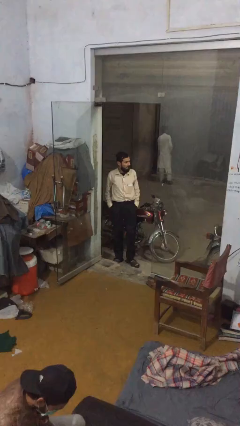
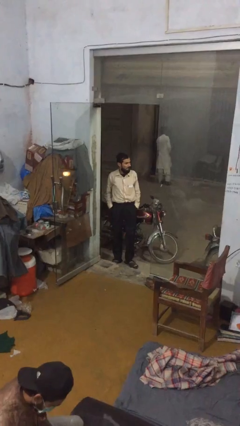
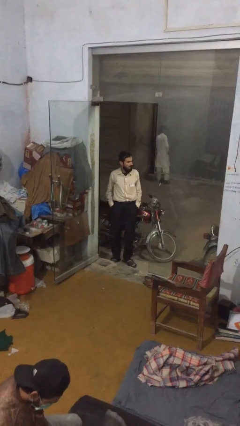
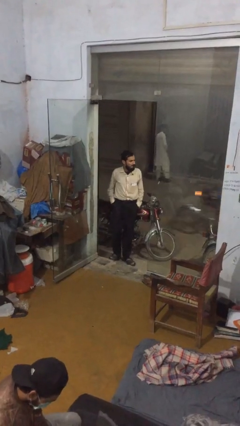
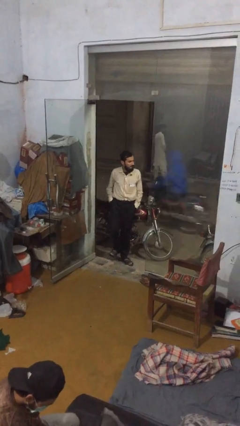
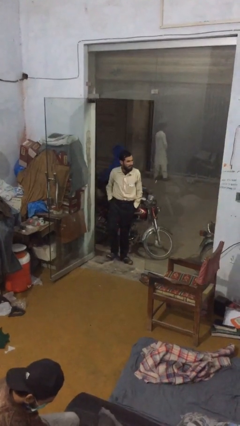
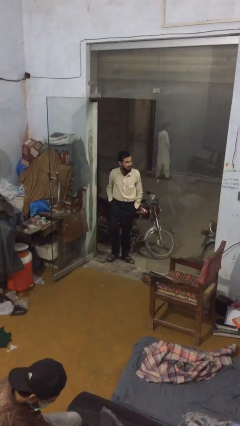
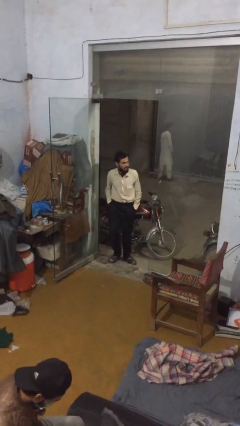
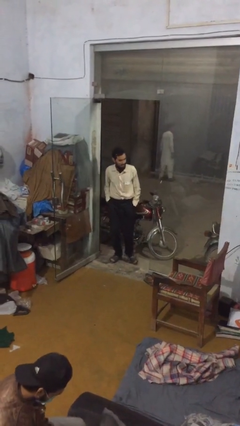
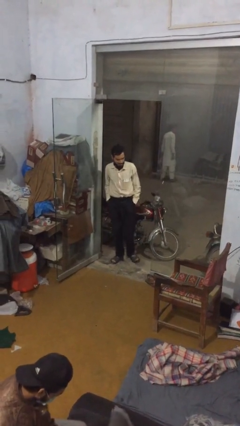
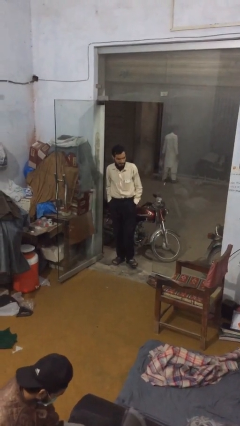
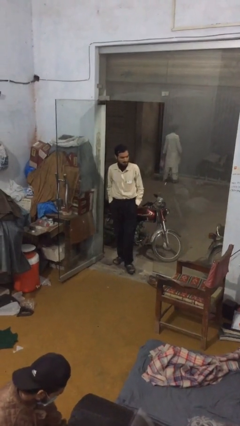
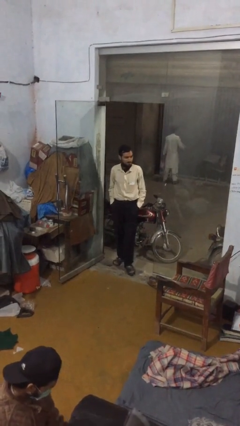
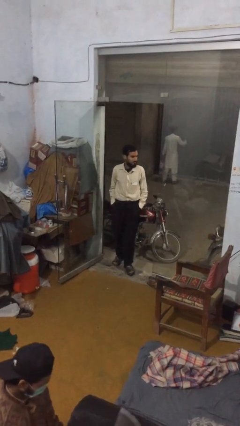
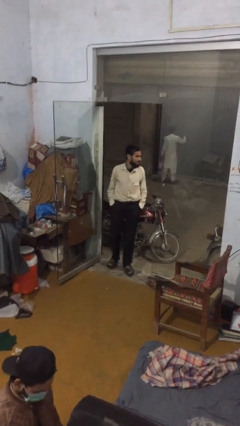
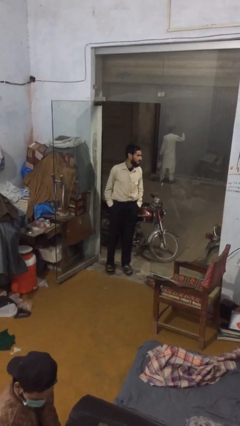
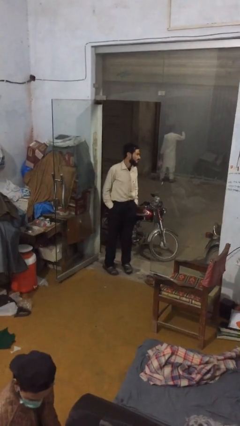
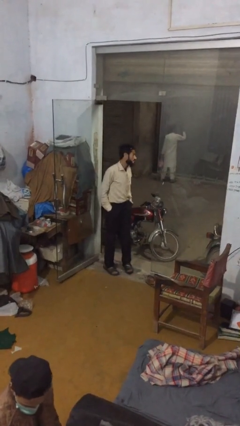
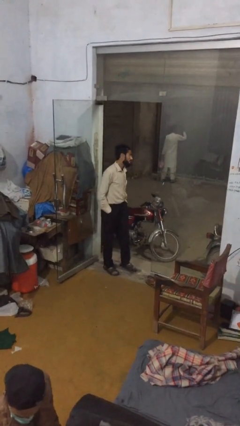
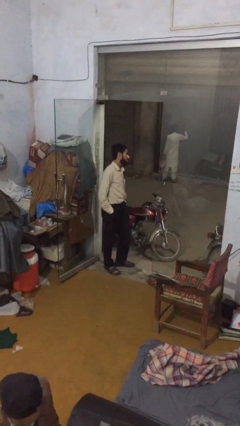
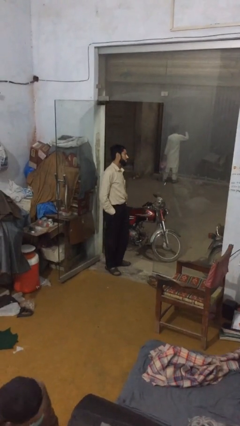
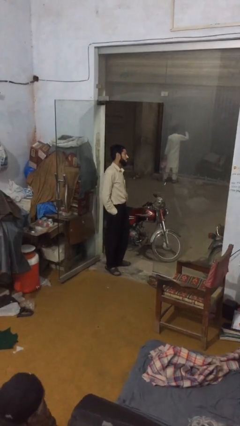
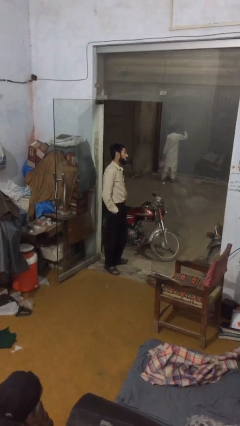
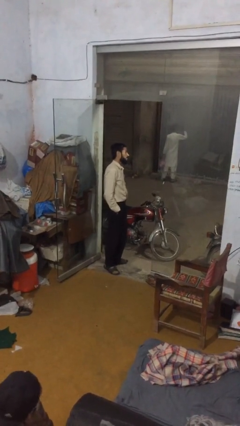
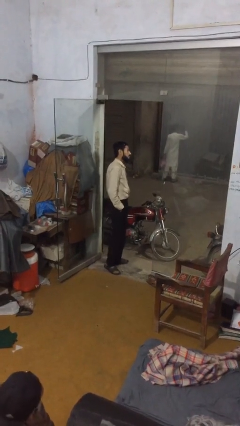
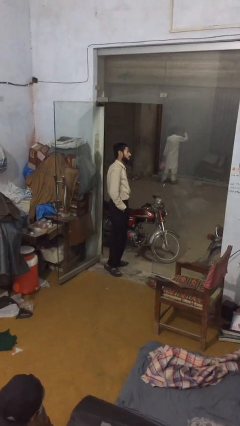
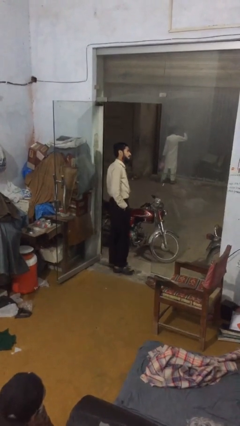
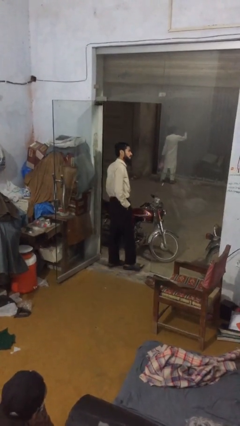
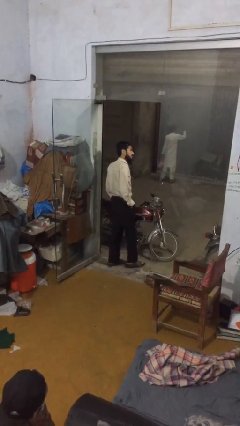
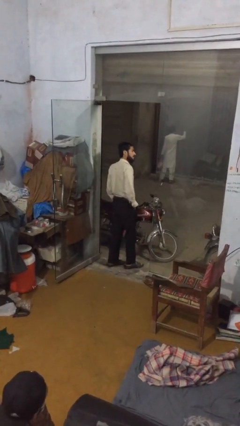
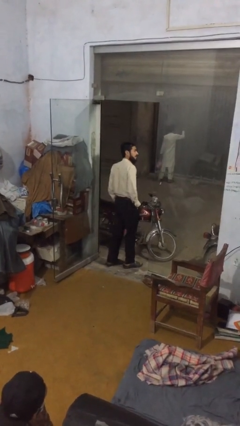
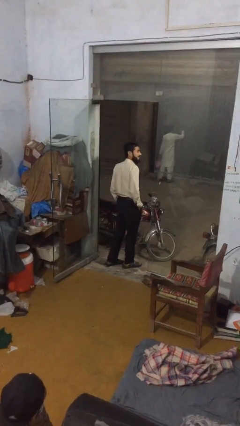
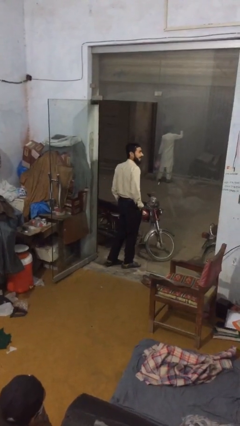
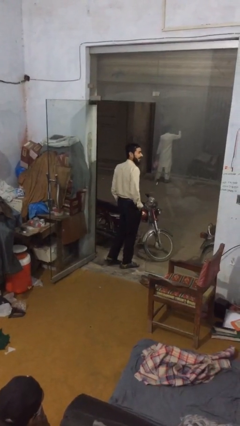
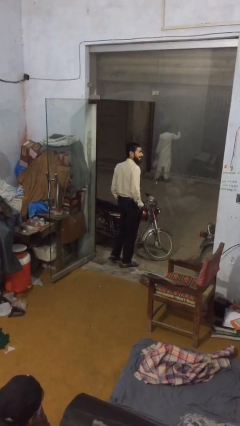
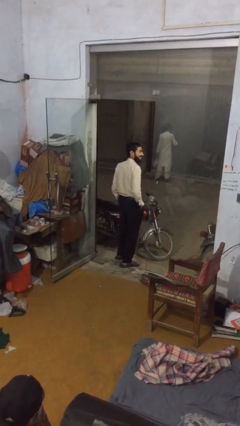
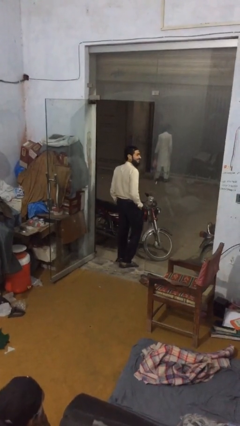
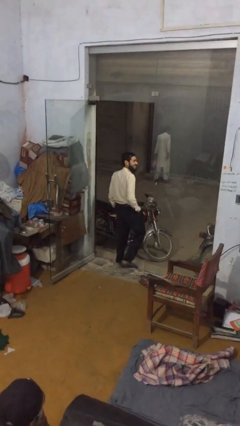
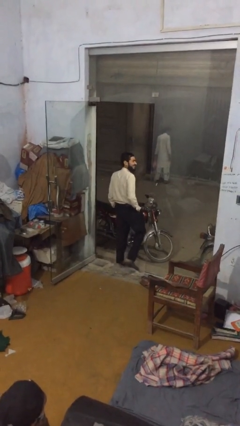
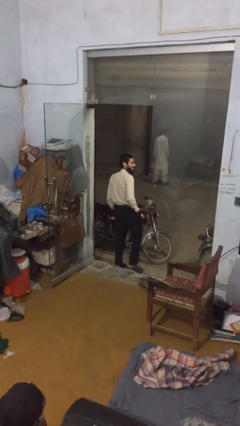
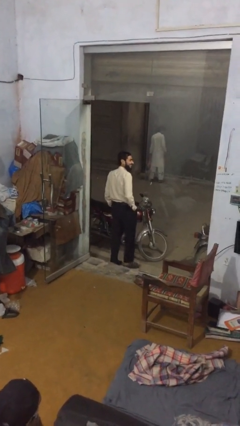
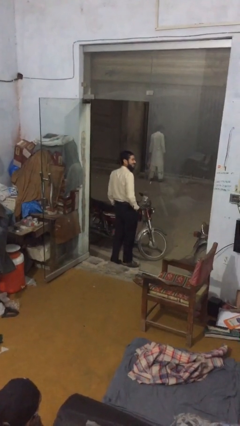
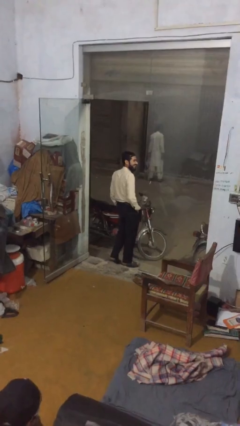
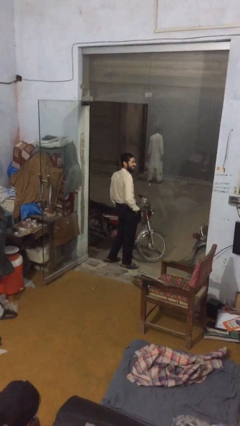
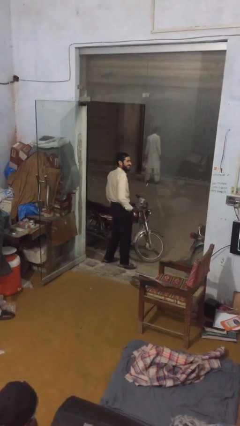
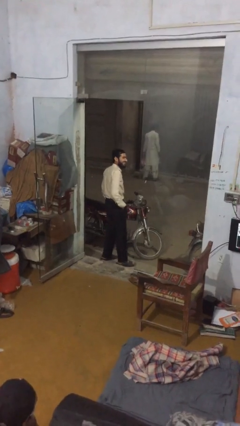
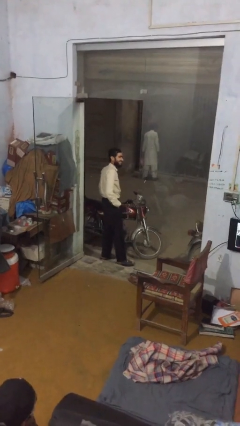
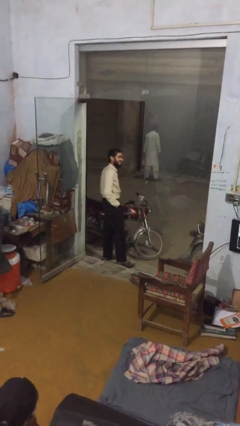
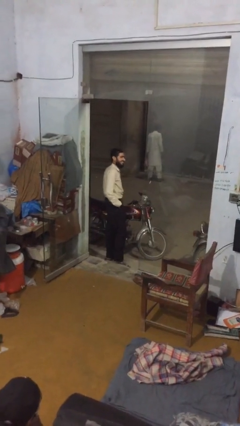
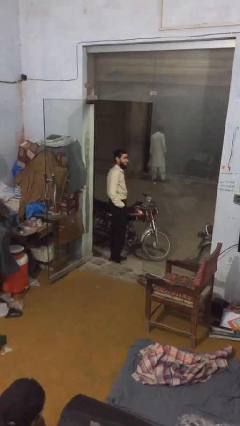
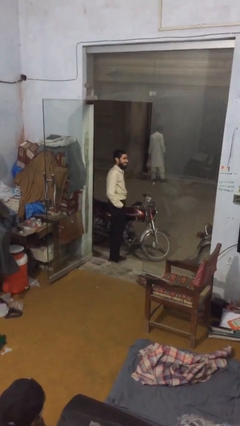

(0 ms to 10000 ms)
person walks

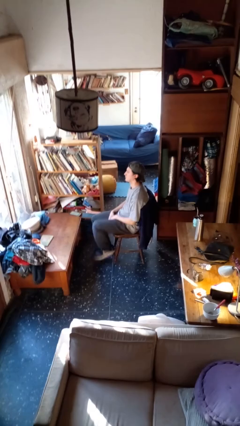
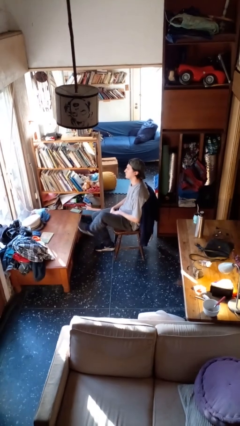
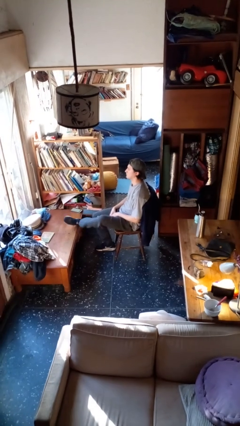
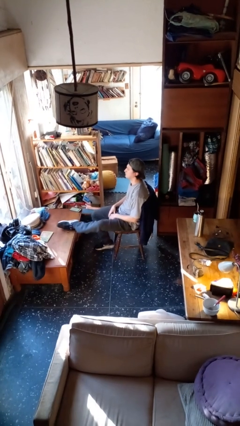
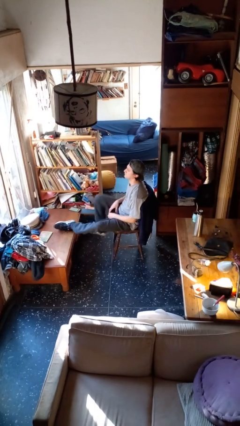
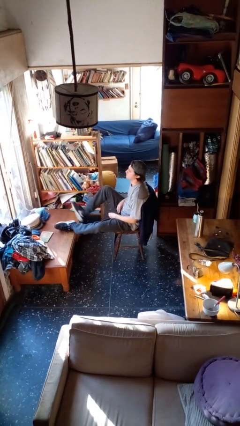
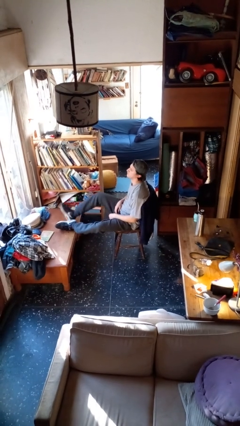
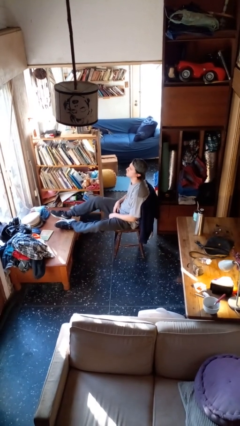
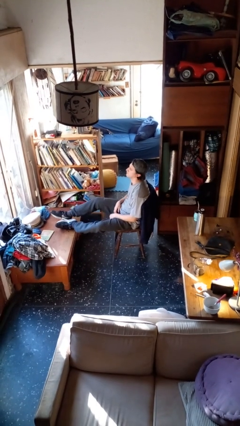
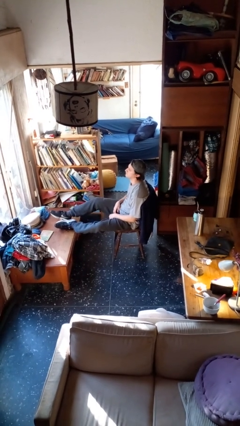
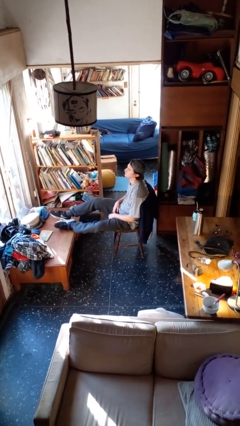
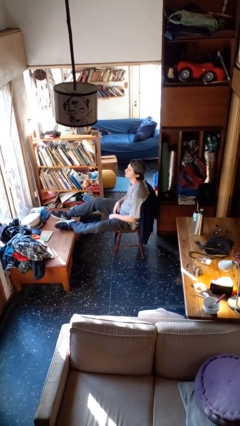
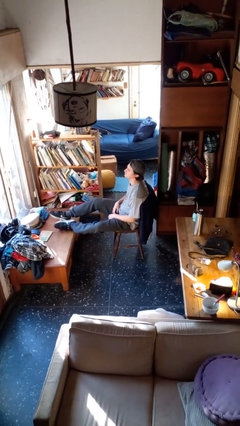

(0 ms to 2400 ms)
person puts feet up

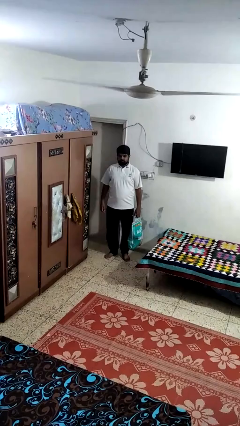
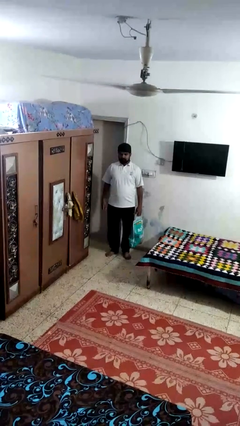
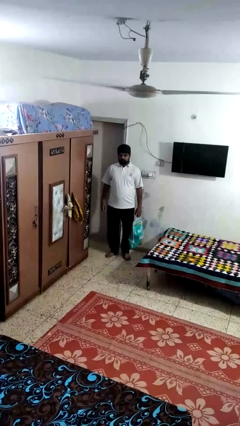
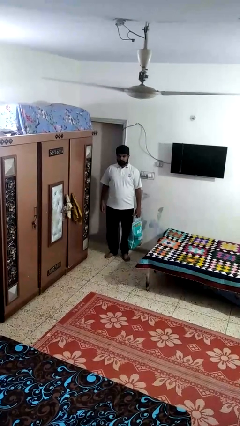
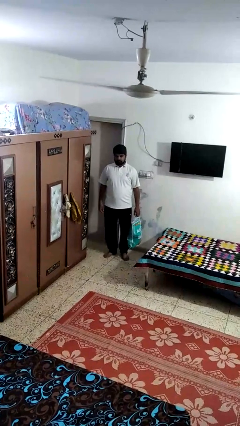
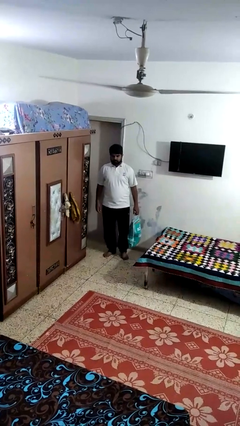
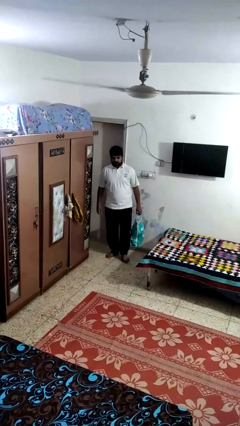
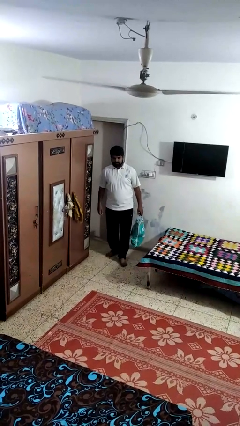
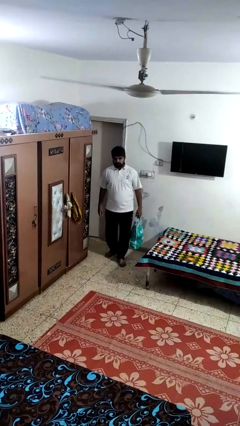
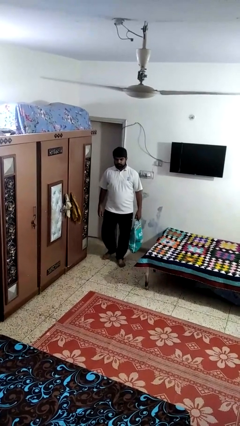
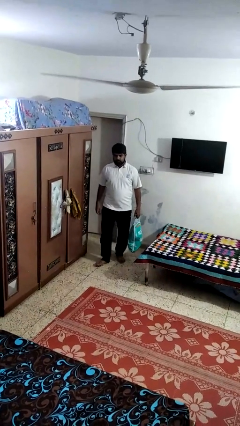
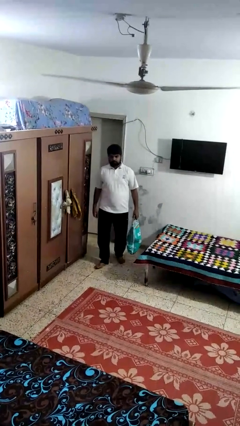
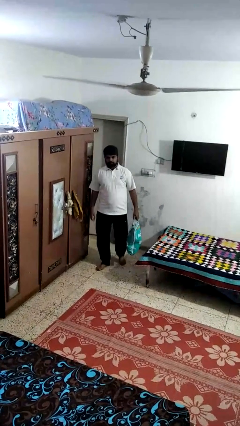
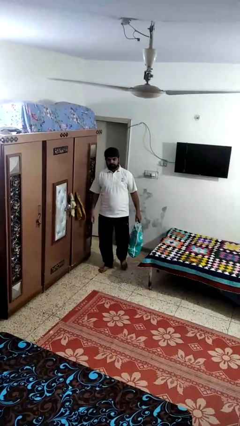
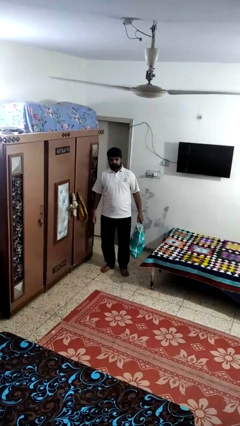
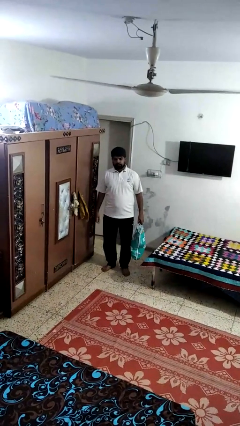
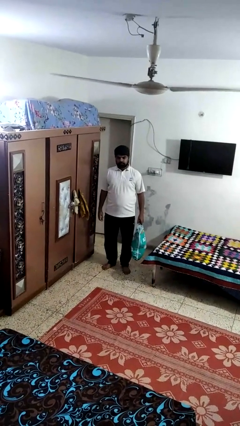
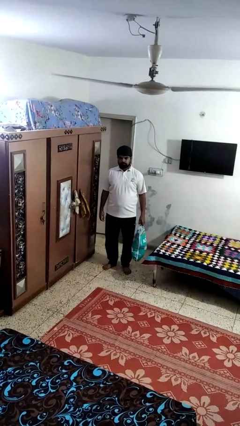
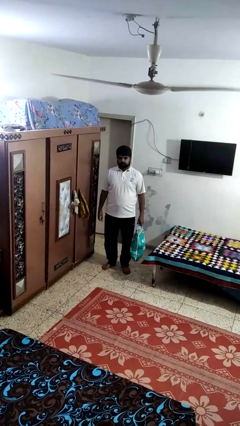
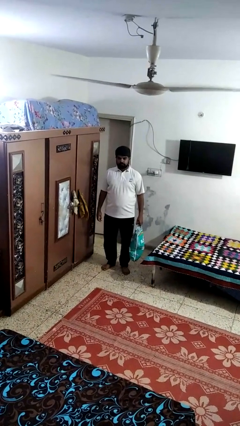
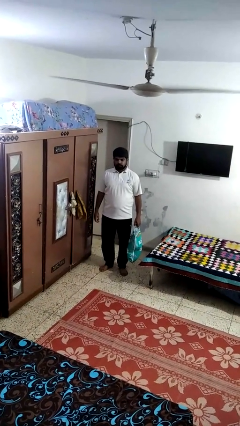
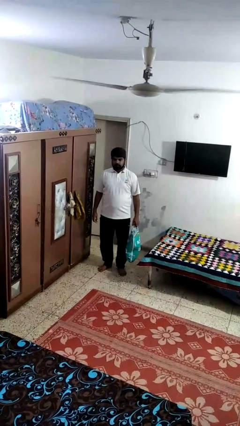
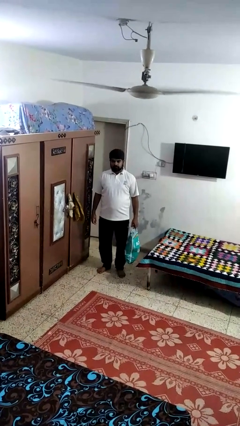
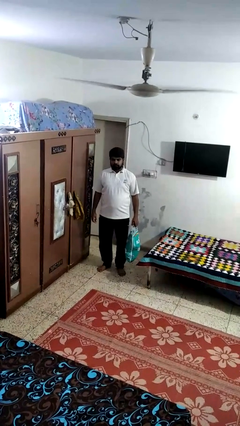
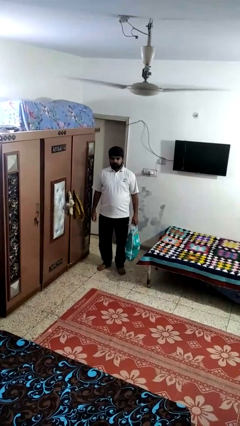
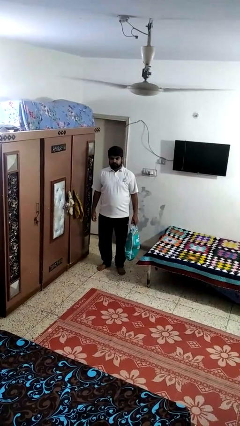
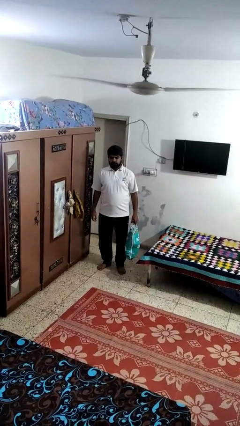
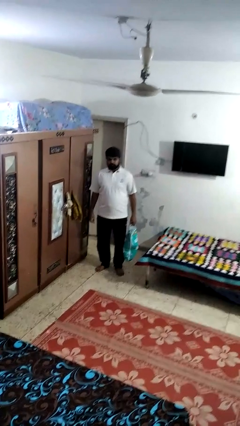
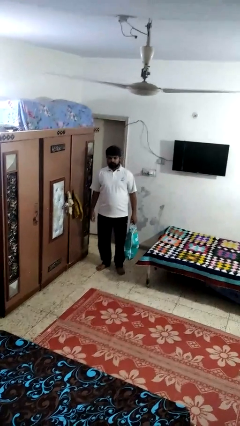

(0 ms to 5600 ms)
person carries groceries
